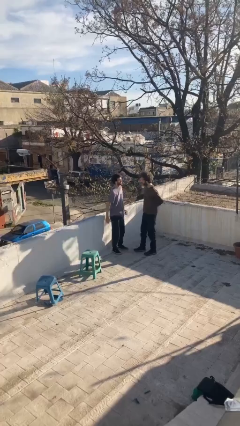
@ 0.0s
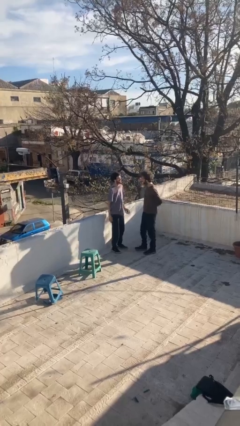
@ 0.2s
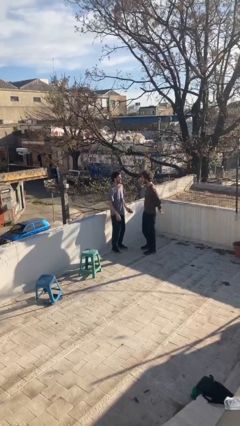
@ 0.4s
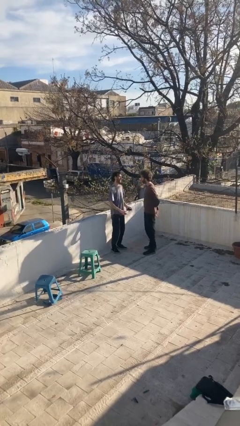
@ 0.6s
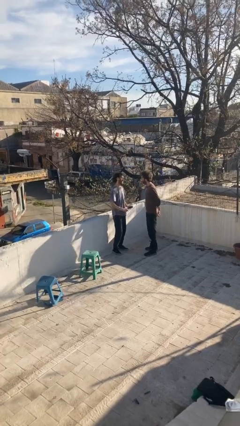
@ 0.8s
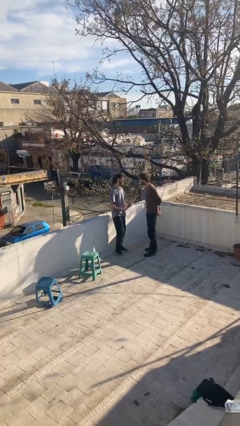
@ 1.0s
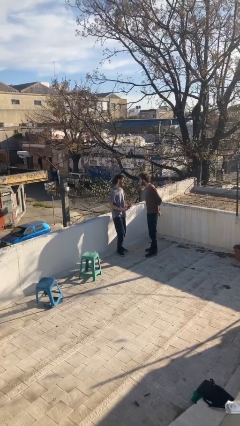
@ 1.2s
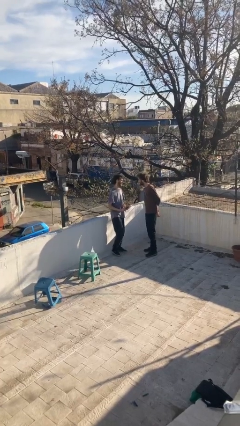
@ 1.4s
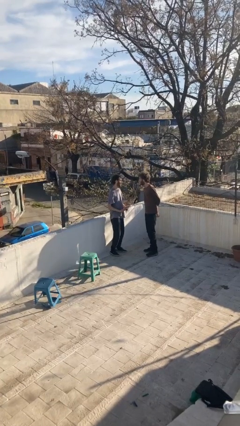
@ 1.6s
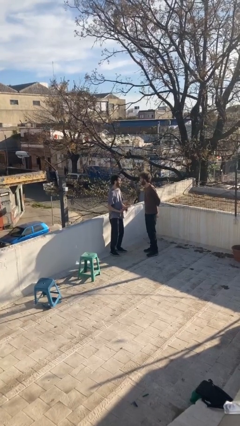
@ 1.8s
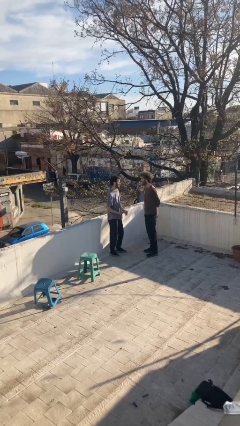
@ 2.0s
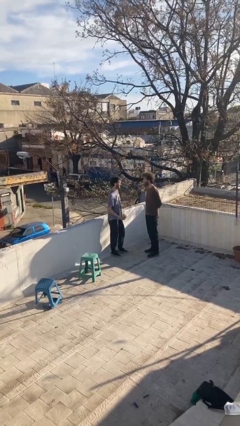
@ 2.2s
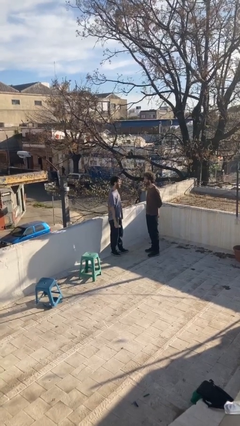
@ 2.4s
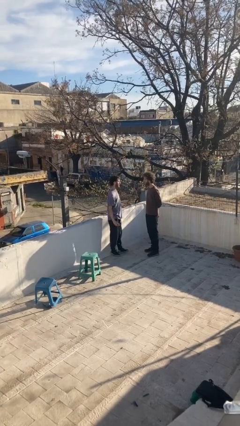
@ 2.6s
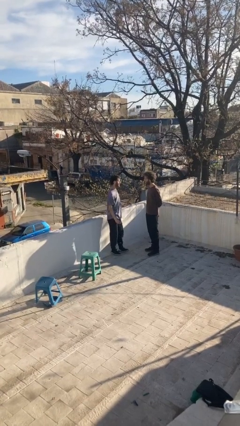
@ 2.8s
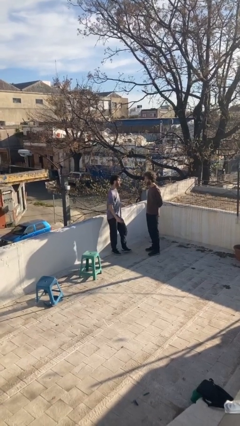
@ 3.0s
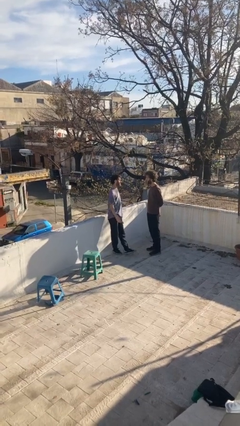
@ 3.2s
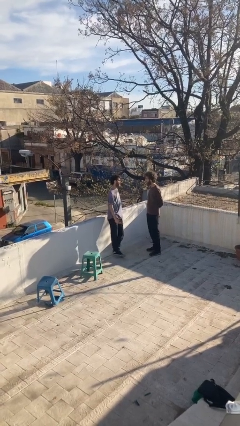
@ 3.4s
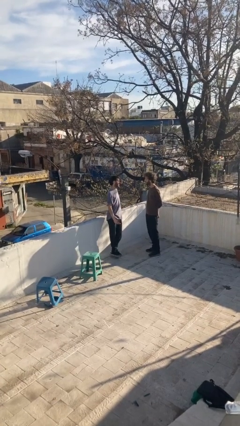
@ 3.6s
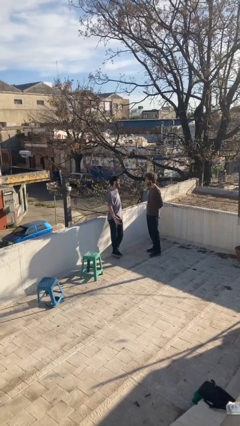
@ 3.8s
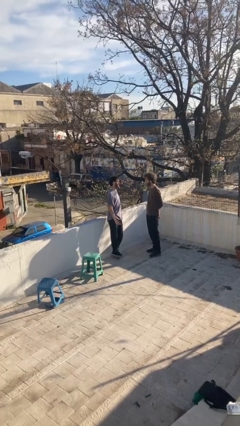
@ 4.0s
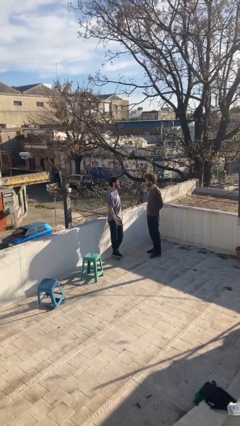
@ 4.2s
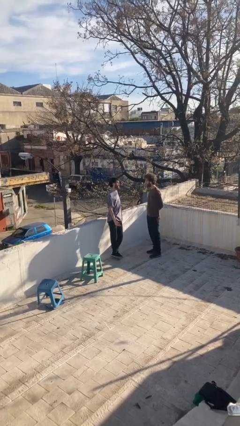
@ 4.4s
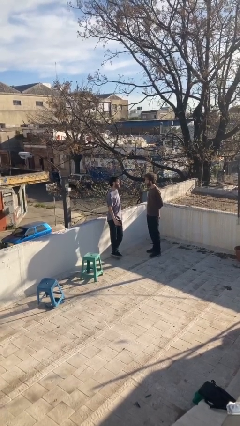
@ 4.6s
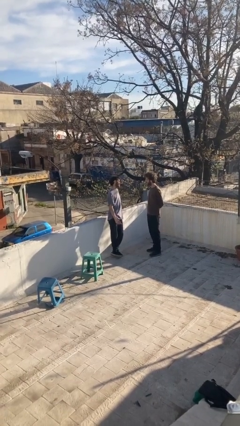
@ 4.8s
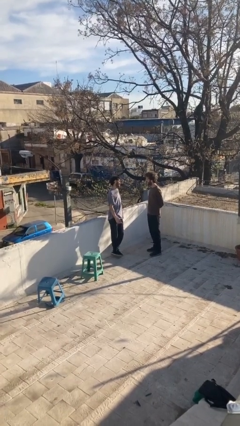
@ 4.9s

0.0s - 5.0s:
person talks to person

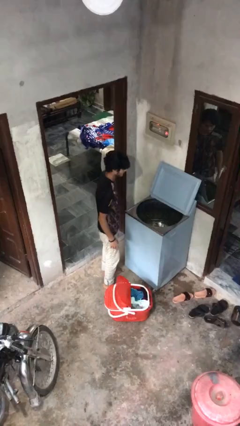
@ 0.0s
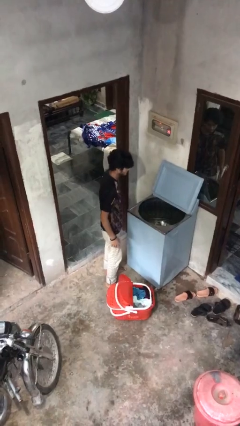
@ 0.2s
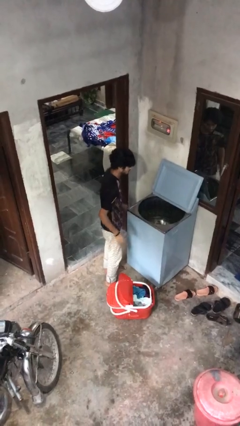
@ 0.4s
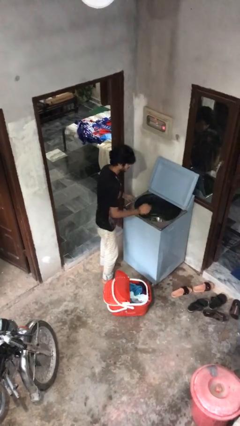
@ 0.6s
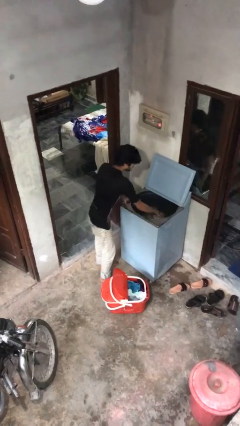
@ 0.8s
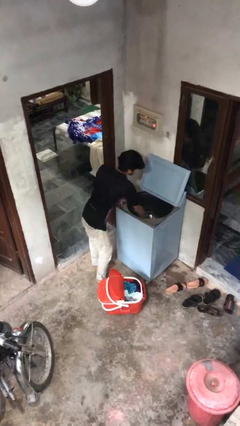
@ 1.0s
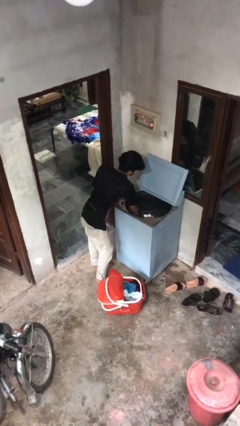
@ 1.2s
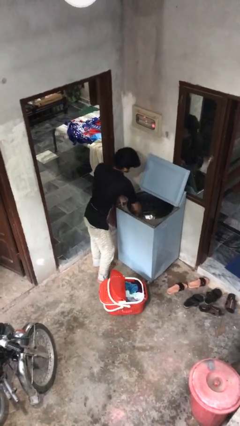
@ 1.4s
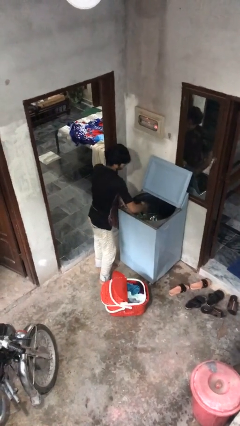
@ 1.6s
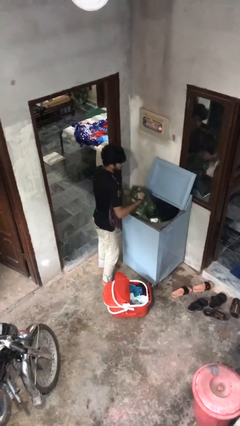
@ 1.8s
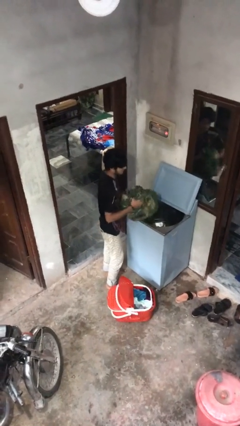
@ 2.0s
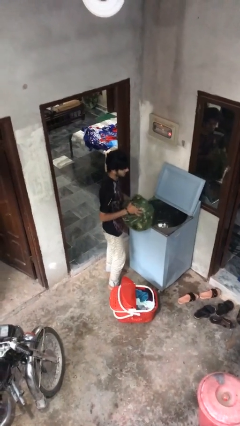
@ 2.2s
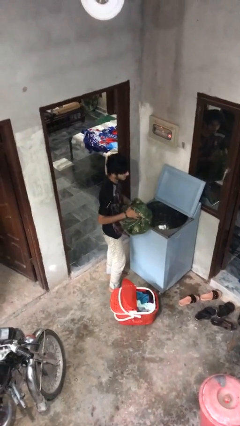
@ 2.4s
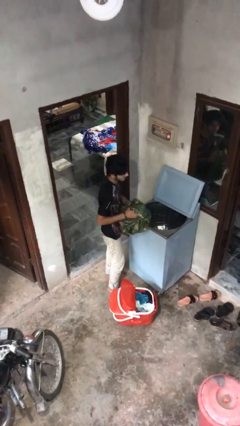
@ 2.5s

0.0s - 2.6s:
person unloads clotheswasher

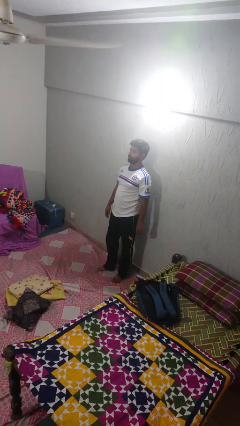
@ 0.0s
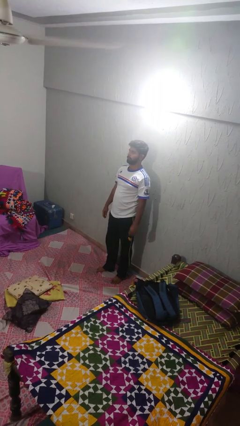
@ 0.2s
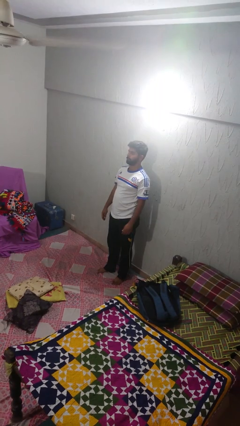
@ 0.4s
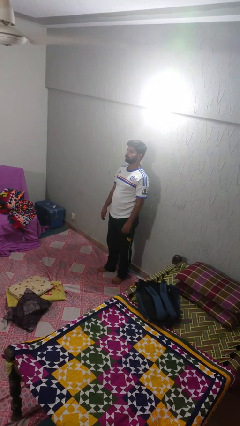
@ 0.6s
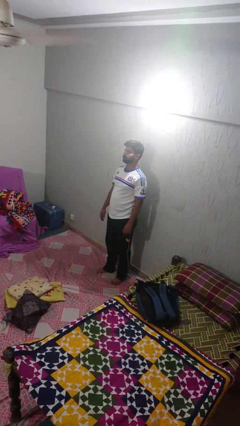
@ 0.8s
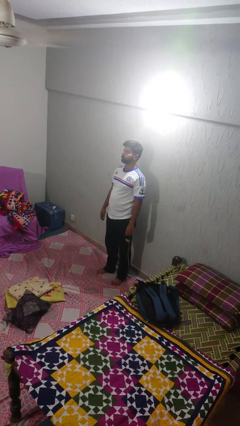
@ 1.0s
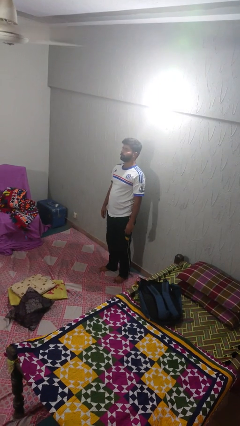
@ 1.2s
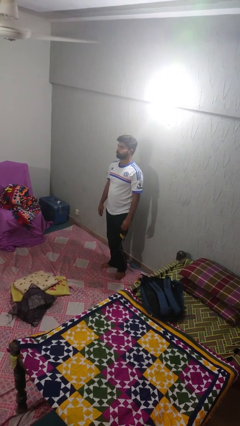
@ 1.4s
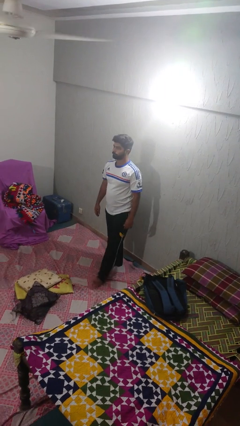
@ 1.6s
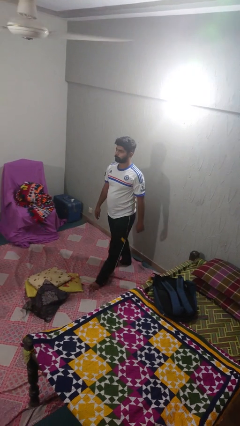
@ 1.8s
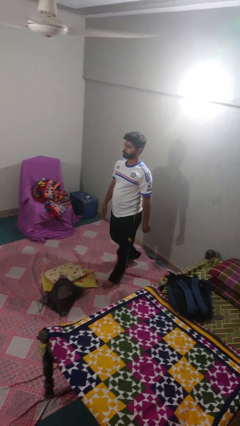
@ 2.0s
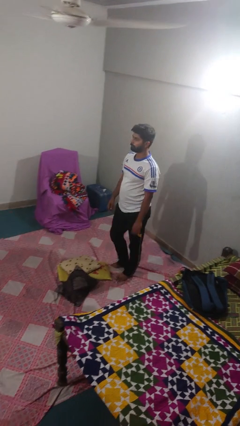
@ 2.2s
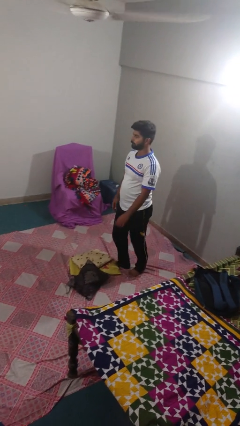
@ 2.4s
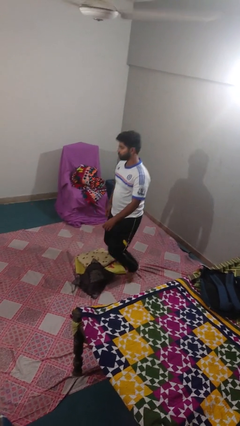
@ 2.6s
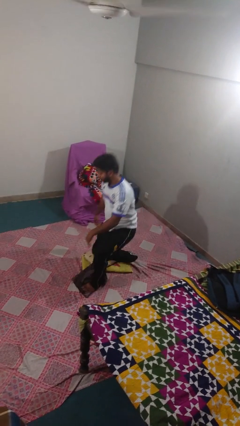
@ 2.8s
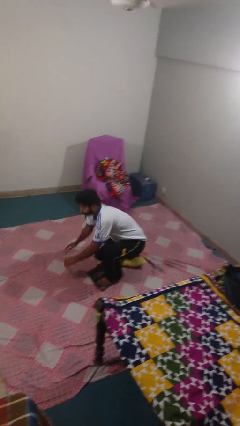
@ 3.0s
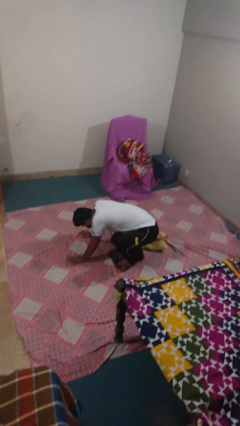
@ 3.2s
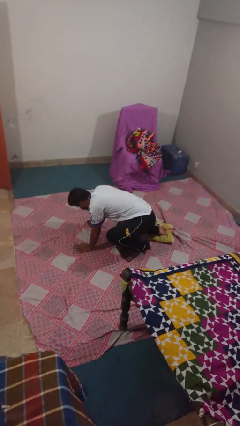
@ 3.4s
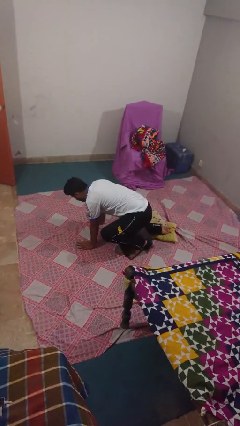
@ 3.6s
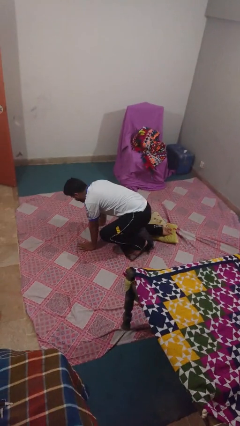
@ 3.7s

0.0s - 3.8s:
person trips on object on floor

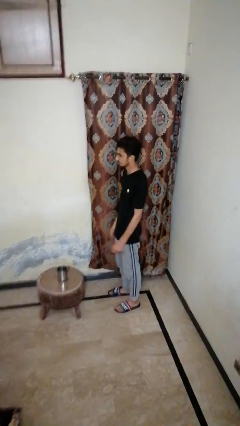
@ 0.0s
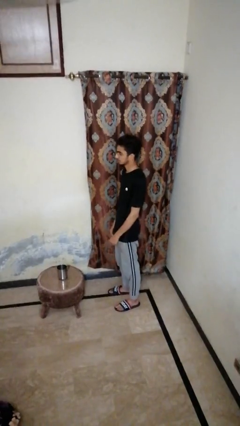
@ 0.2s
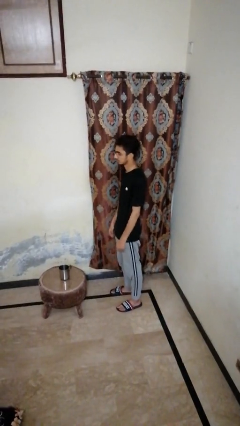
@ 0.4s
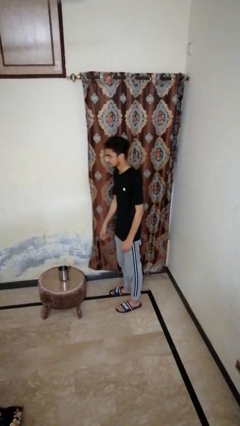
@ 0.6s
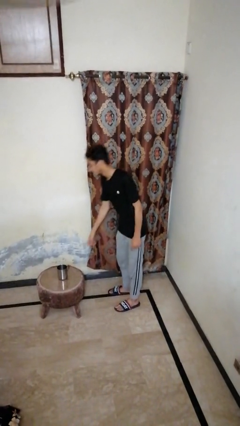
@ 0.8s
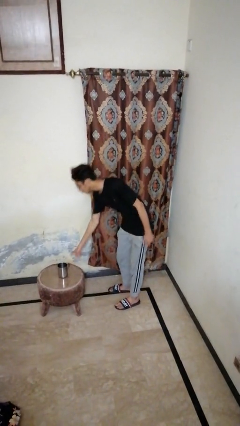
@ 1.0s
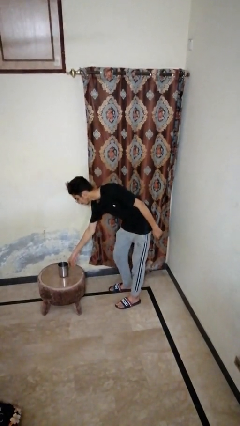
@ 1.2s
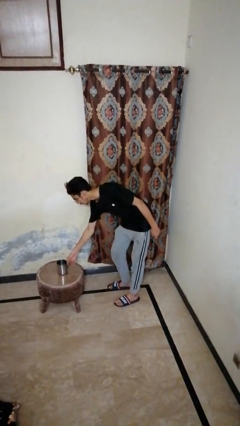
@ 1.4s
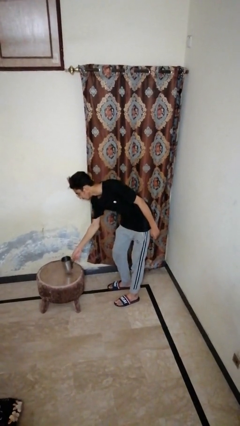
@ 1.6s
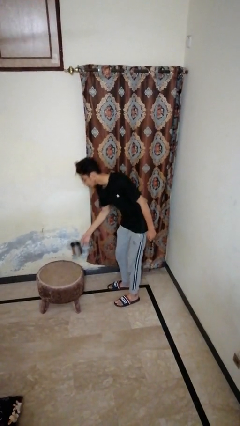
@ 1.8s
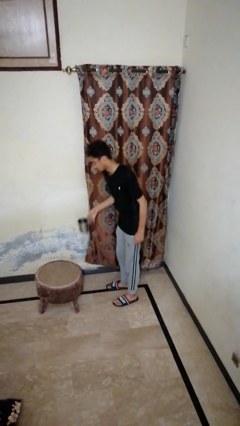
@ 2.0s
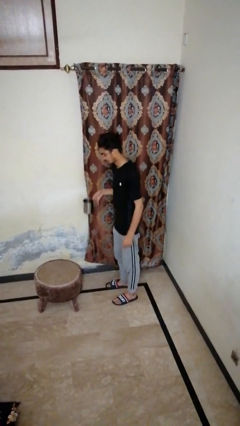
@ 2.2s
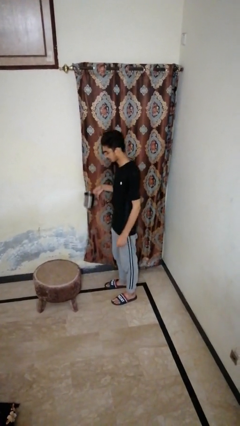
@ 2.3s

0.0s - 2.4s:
person picks up object from table

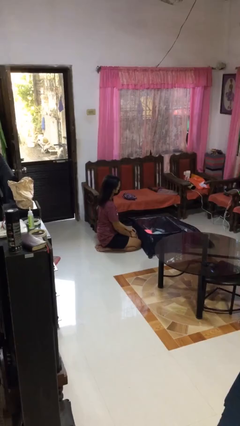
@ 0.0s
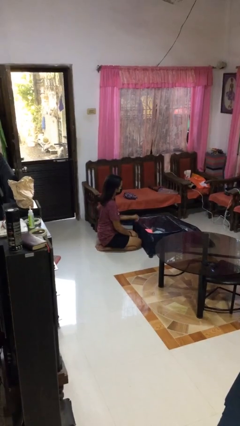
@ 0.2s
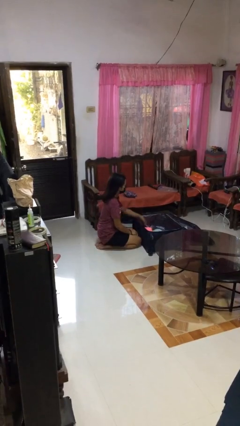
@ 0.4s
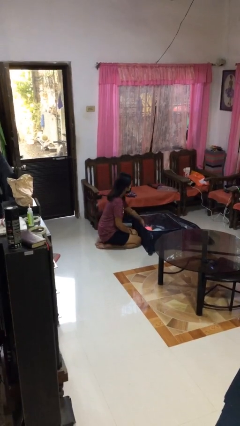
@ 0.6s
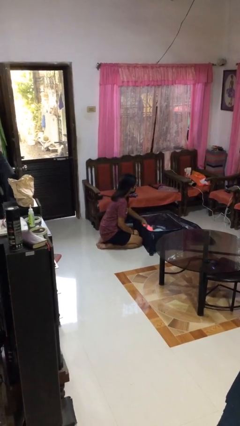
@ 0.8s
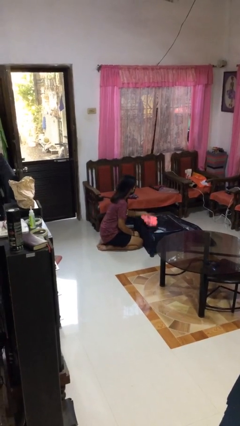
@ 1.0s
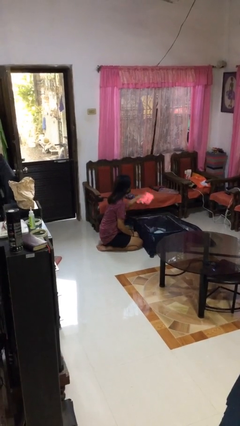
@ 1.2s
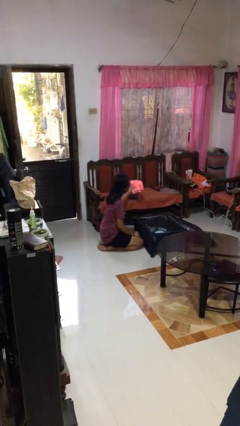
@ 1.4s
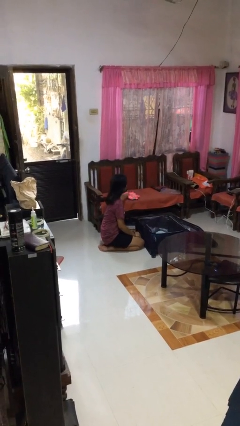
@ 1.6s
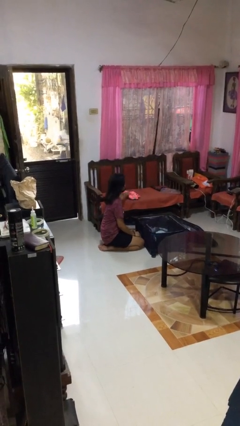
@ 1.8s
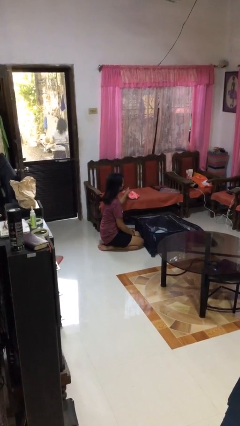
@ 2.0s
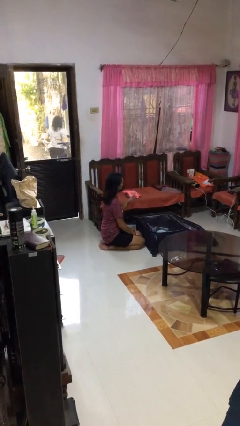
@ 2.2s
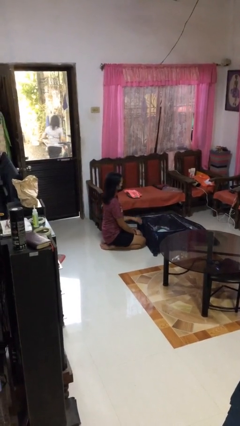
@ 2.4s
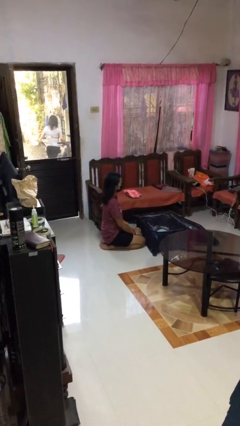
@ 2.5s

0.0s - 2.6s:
person unloads clothes from suitcase

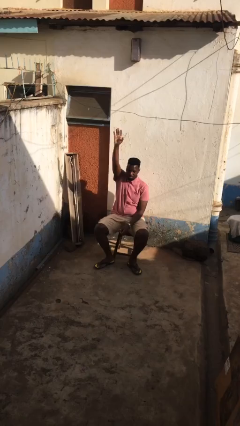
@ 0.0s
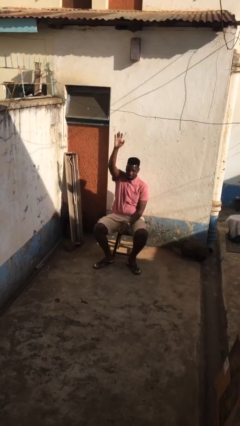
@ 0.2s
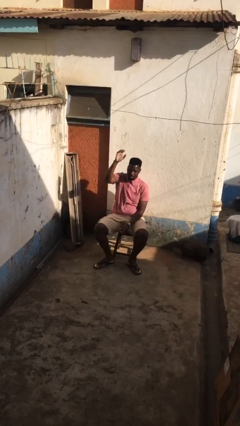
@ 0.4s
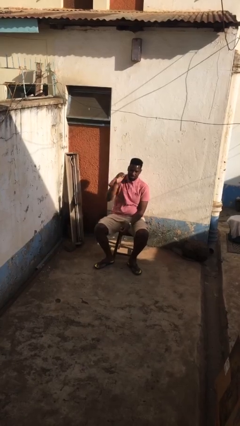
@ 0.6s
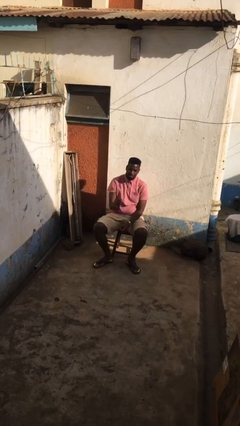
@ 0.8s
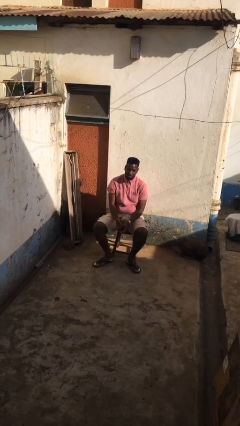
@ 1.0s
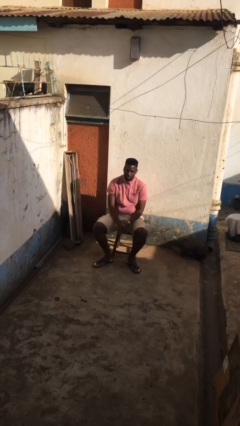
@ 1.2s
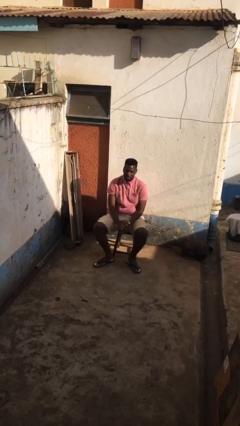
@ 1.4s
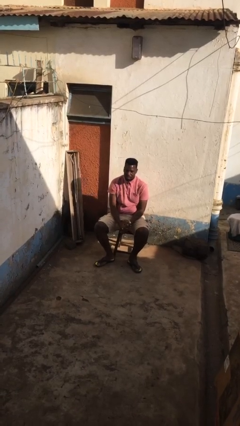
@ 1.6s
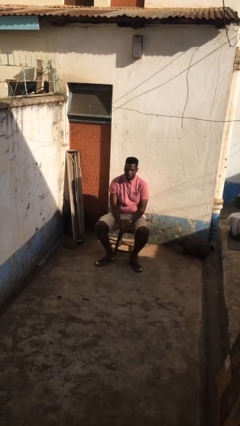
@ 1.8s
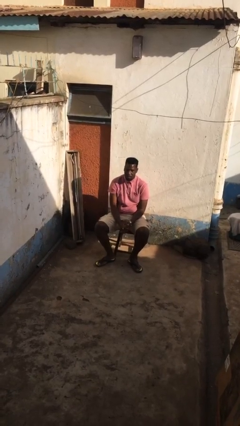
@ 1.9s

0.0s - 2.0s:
person gestures lower hand
